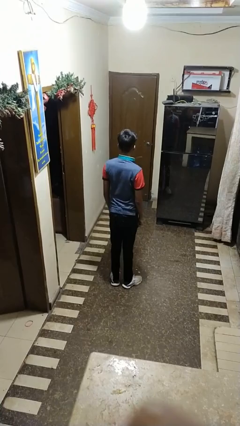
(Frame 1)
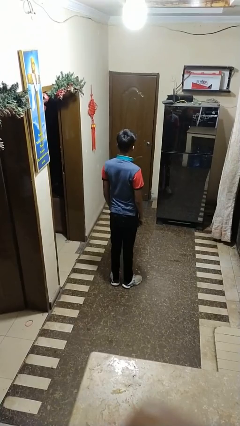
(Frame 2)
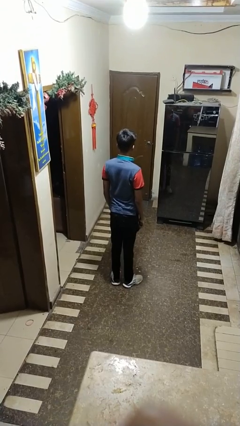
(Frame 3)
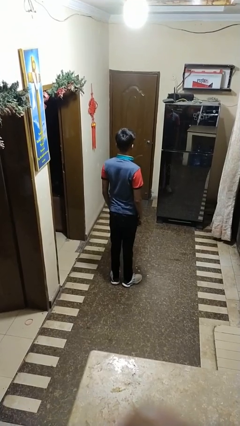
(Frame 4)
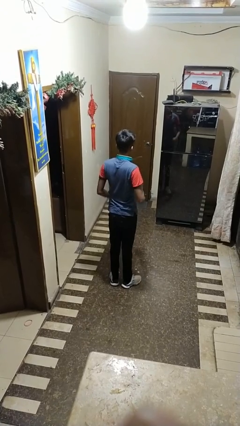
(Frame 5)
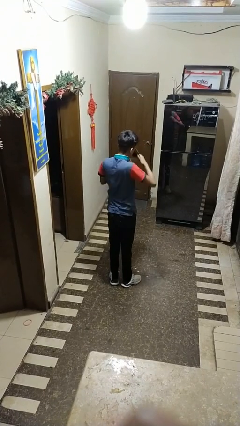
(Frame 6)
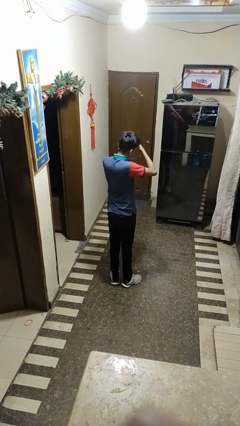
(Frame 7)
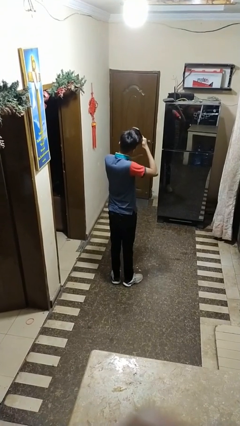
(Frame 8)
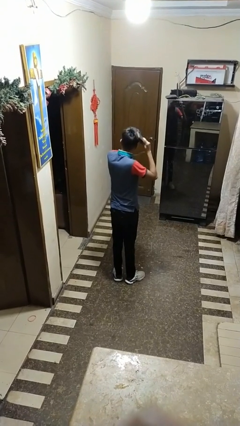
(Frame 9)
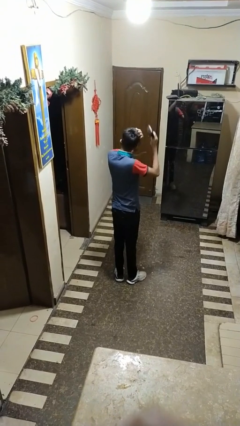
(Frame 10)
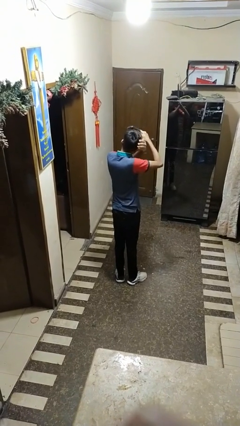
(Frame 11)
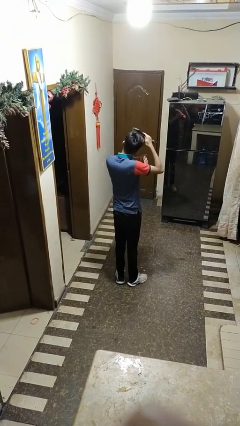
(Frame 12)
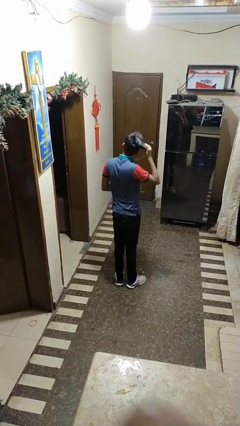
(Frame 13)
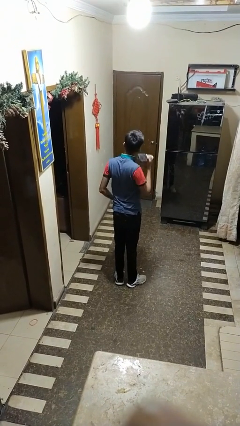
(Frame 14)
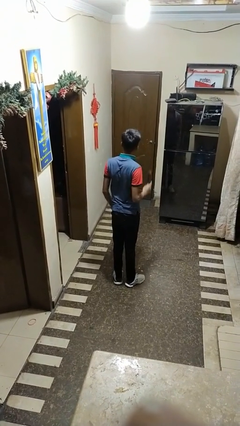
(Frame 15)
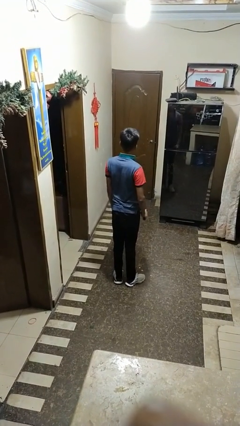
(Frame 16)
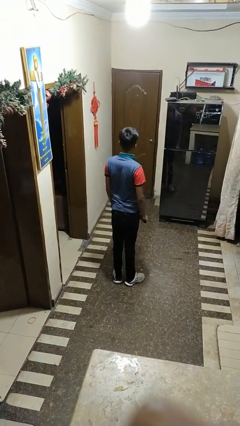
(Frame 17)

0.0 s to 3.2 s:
person brushes hair

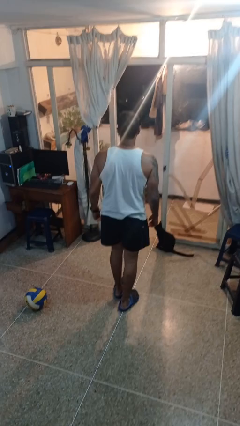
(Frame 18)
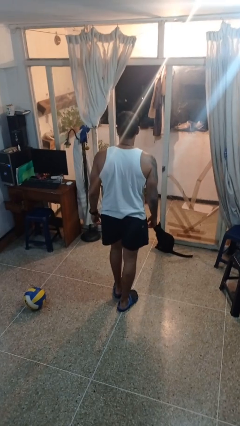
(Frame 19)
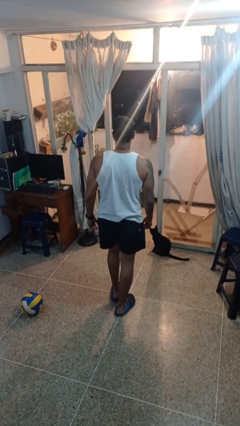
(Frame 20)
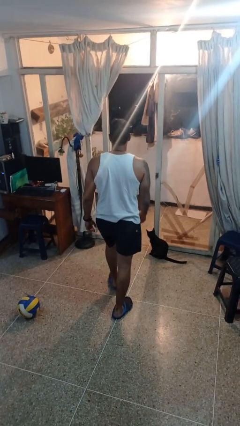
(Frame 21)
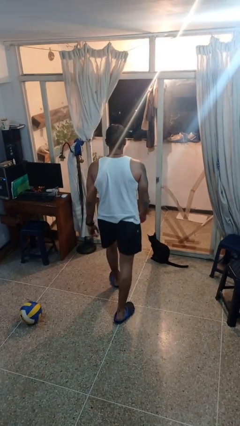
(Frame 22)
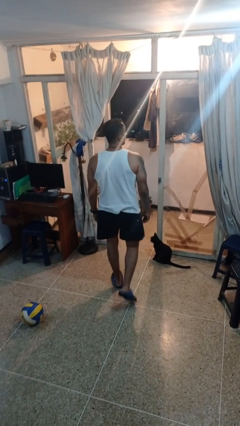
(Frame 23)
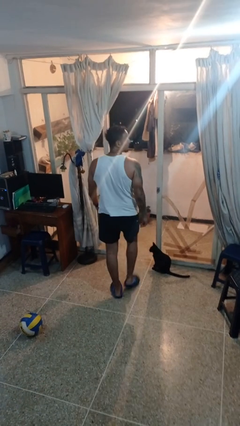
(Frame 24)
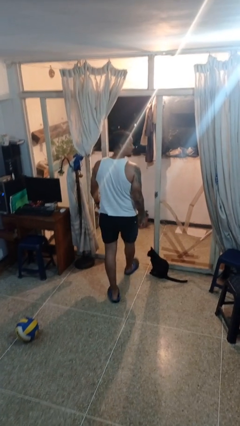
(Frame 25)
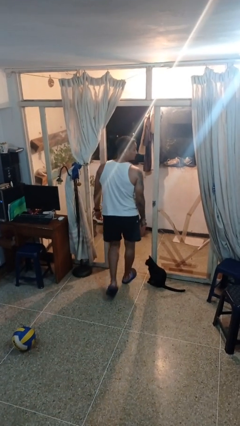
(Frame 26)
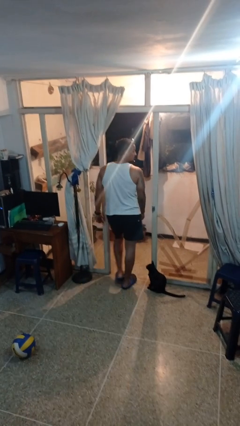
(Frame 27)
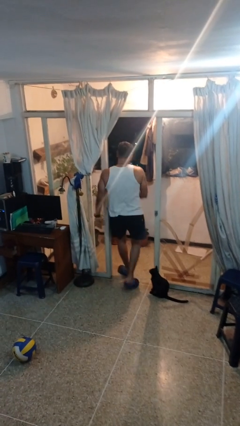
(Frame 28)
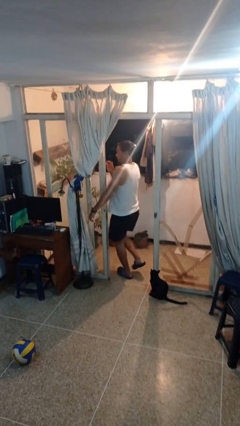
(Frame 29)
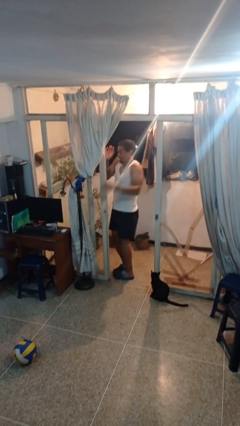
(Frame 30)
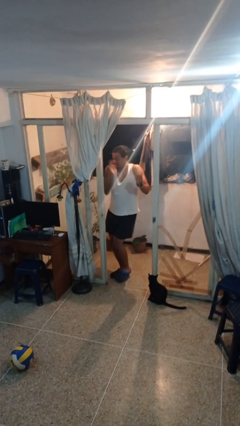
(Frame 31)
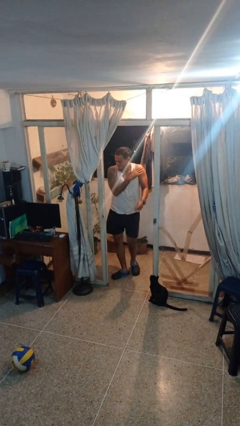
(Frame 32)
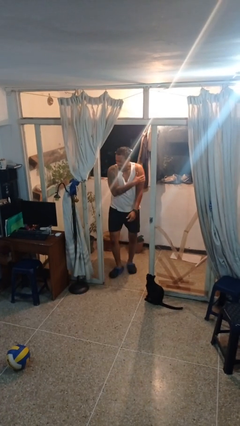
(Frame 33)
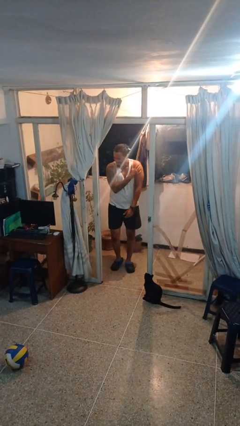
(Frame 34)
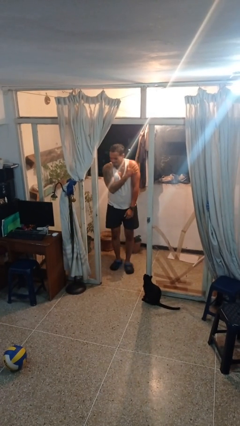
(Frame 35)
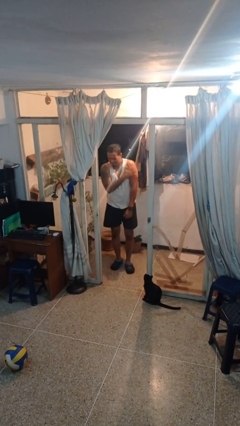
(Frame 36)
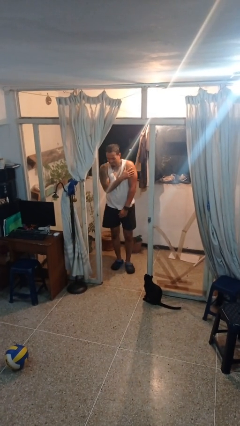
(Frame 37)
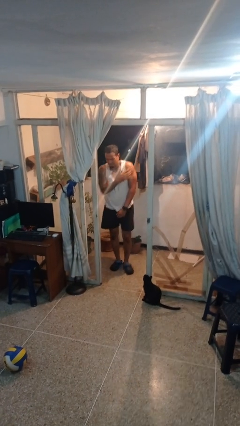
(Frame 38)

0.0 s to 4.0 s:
person bumps into wall

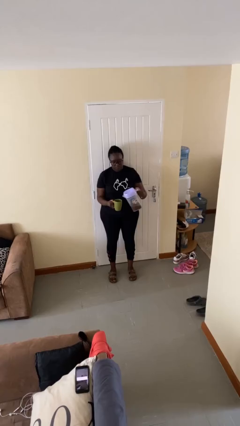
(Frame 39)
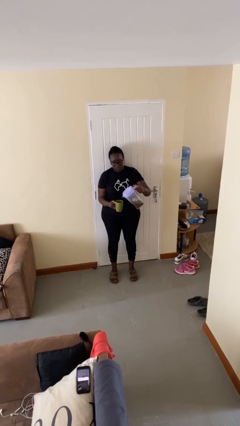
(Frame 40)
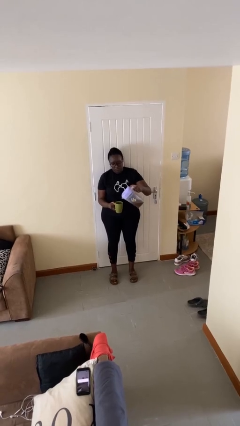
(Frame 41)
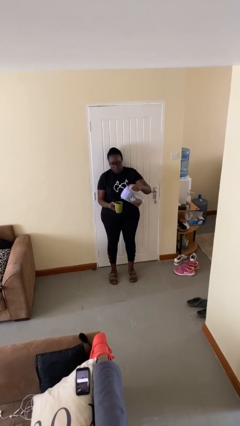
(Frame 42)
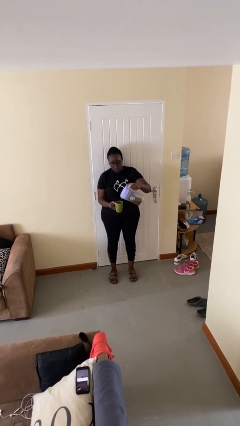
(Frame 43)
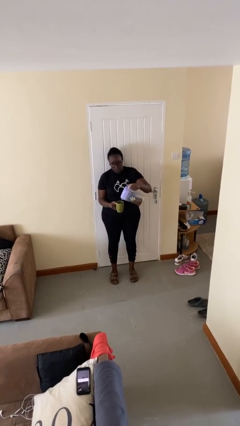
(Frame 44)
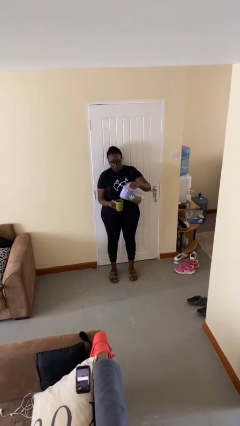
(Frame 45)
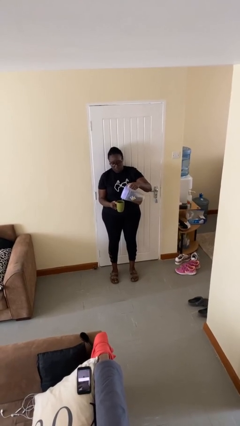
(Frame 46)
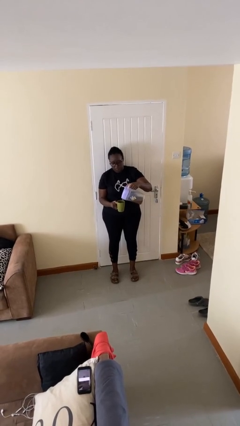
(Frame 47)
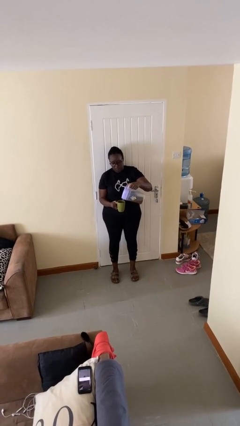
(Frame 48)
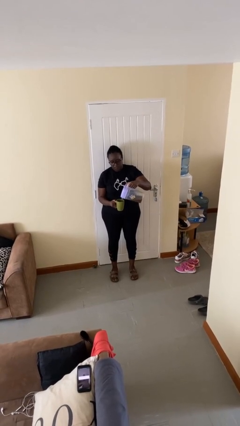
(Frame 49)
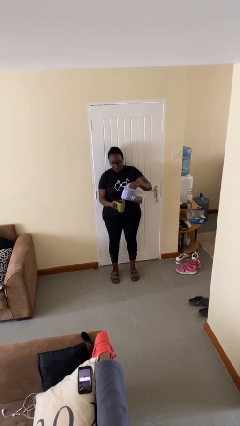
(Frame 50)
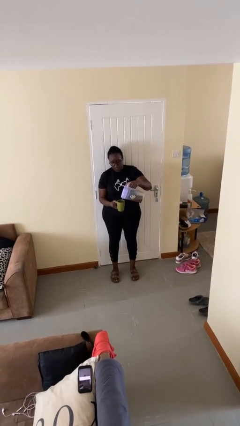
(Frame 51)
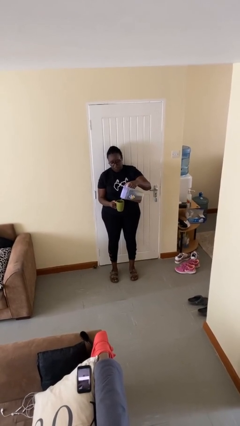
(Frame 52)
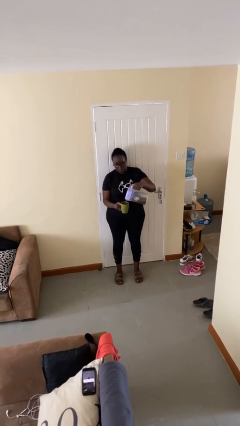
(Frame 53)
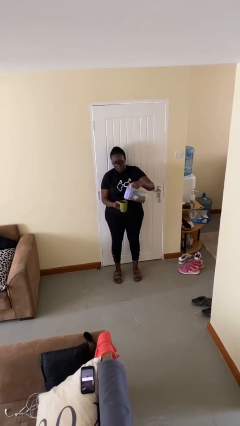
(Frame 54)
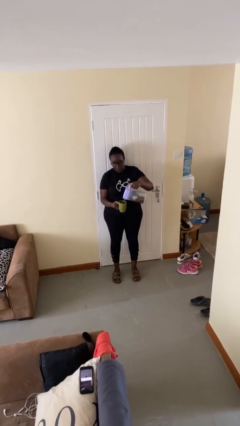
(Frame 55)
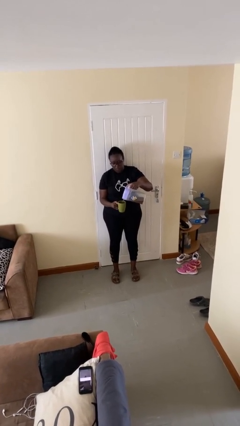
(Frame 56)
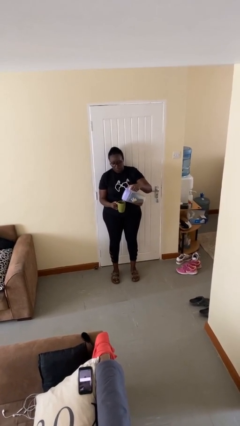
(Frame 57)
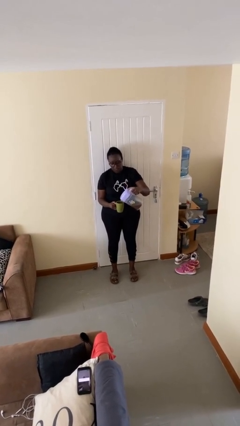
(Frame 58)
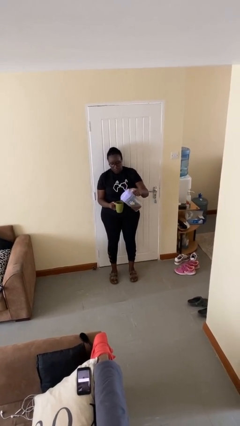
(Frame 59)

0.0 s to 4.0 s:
person pours coffee into mug

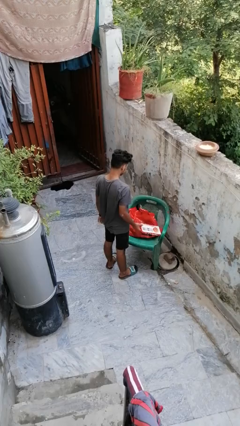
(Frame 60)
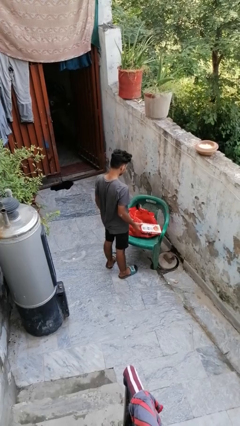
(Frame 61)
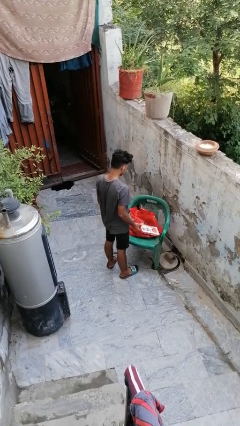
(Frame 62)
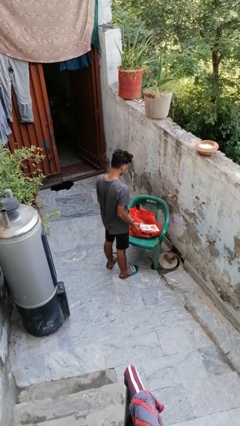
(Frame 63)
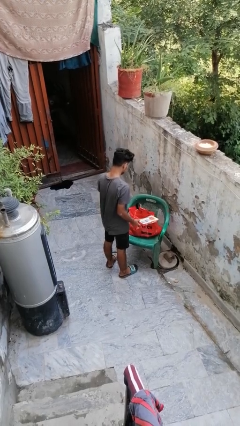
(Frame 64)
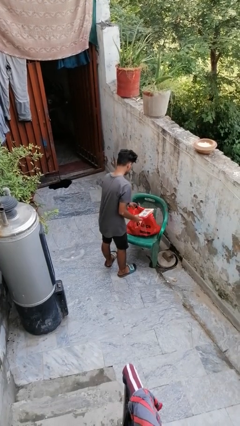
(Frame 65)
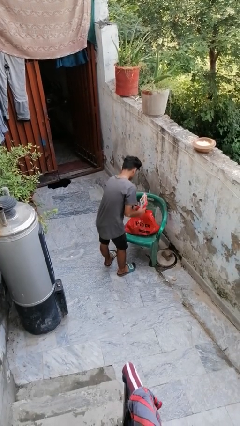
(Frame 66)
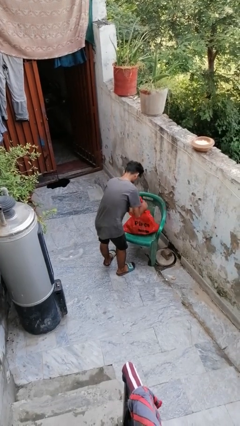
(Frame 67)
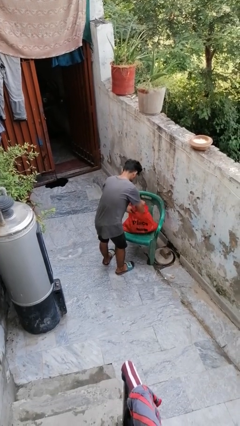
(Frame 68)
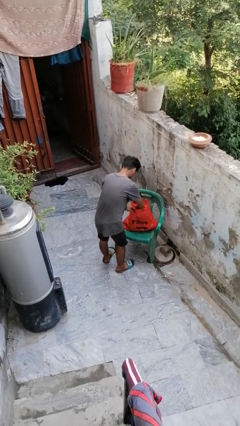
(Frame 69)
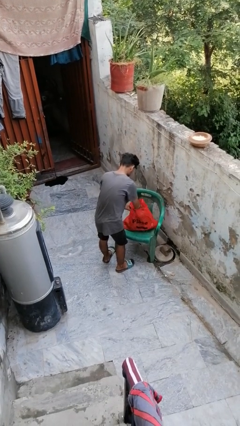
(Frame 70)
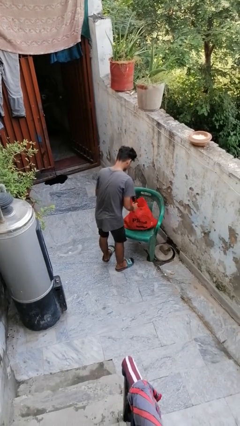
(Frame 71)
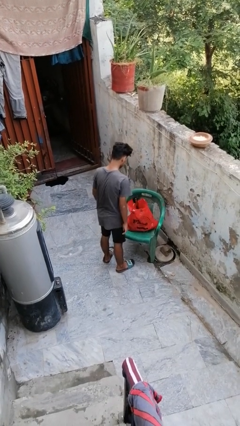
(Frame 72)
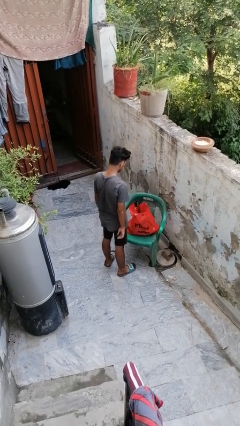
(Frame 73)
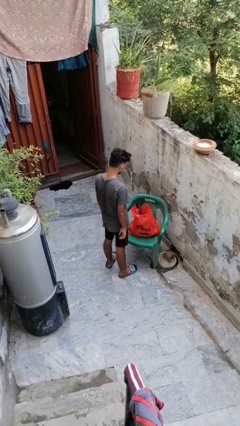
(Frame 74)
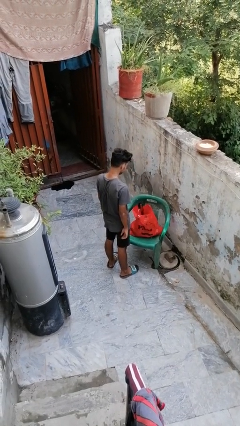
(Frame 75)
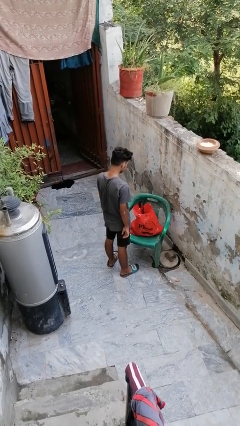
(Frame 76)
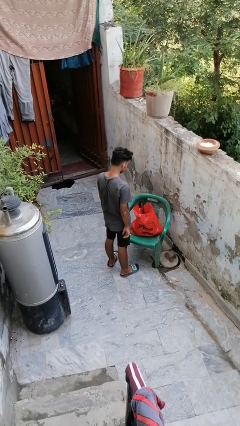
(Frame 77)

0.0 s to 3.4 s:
person puts object into bag

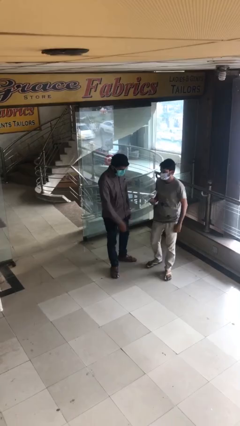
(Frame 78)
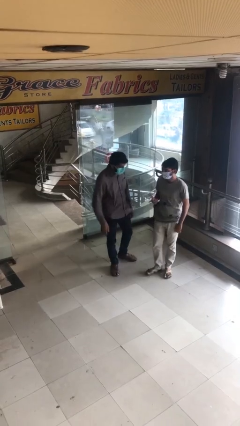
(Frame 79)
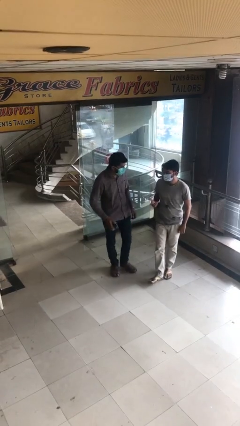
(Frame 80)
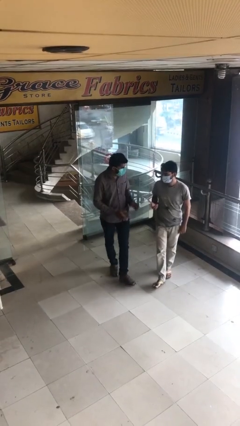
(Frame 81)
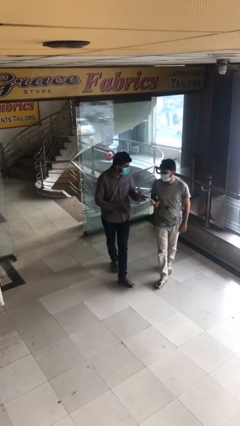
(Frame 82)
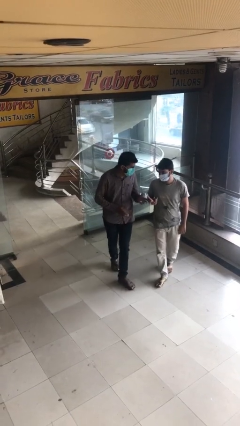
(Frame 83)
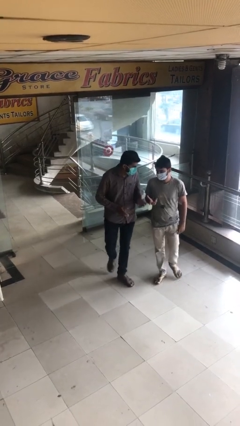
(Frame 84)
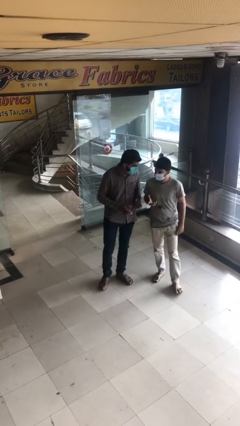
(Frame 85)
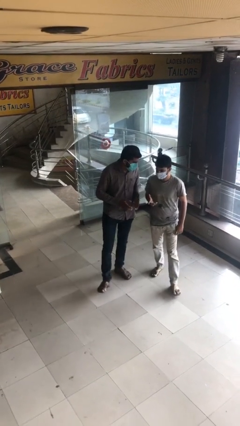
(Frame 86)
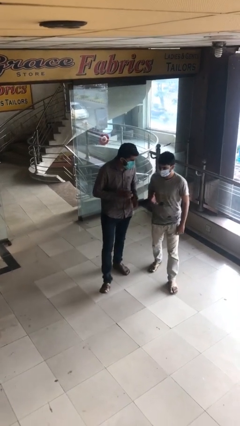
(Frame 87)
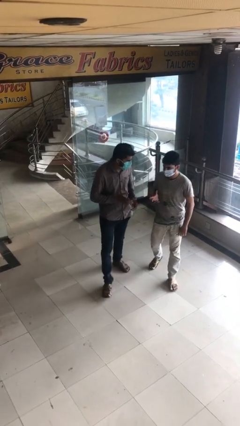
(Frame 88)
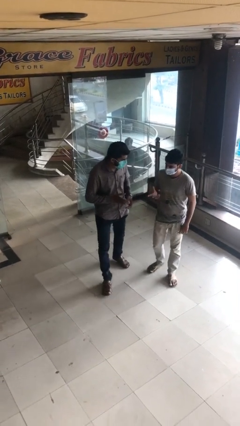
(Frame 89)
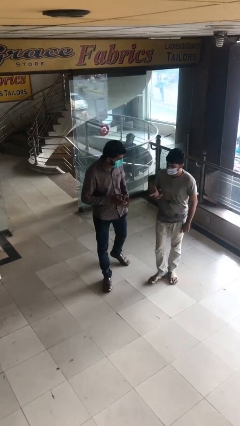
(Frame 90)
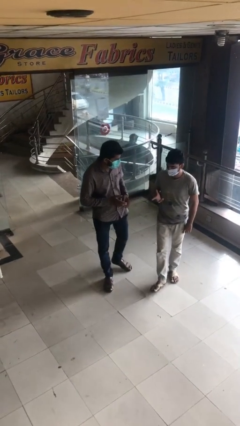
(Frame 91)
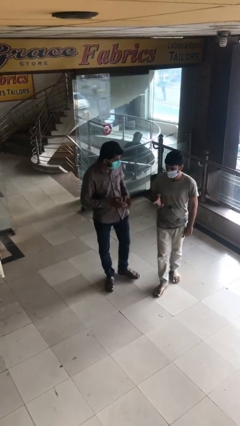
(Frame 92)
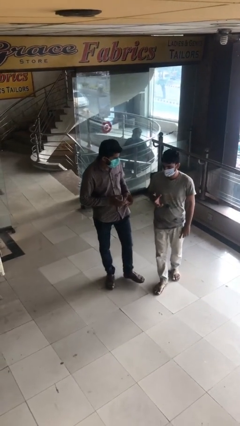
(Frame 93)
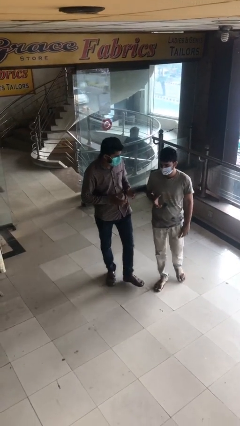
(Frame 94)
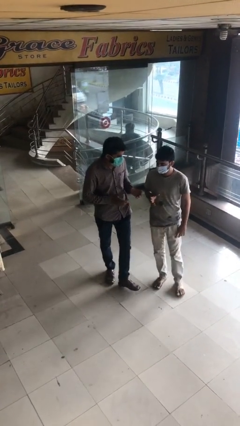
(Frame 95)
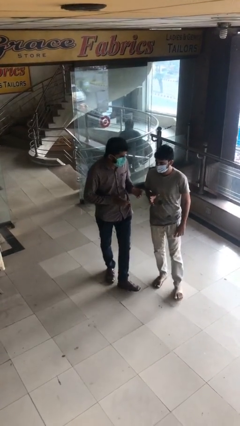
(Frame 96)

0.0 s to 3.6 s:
person talks to person
